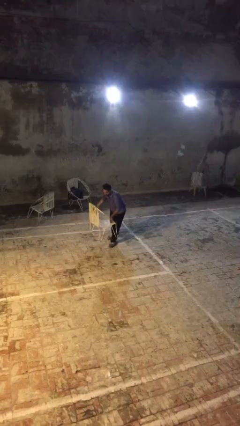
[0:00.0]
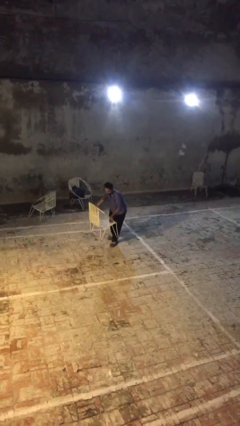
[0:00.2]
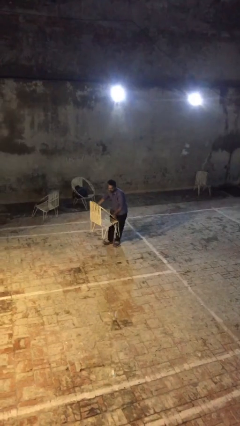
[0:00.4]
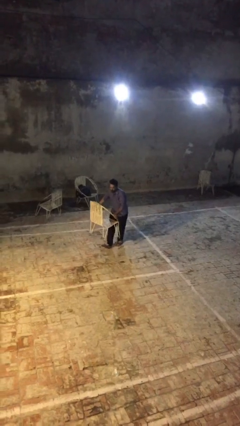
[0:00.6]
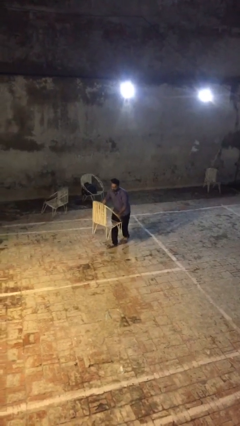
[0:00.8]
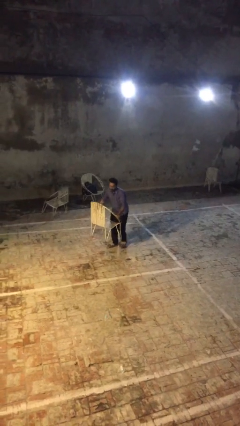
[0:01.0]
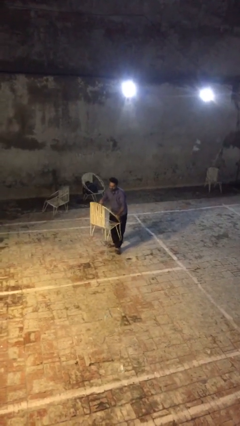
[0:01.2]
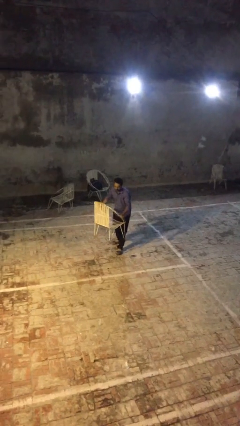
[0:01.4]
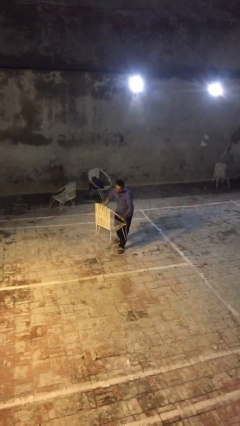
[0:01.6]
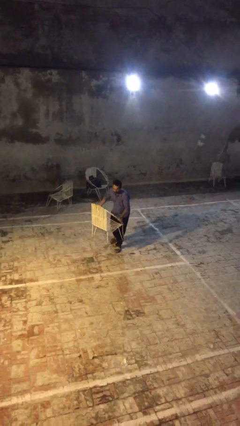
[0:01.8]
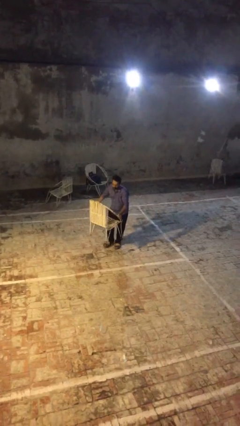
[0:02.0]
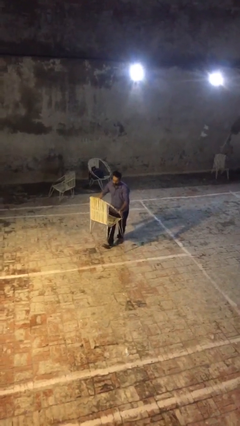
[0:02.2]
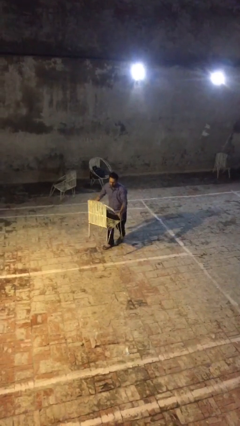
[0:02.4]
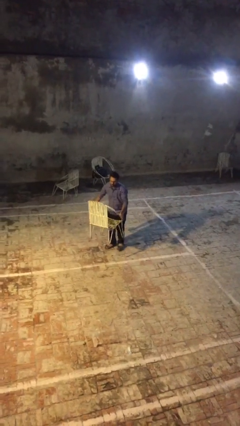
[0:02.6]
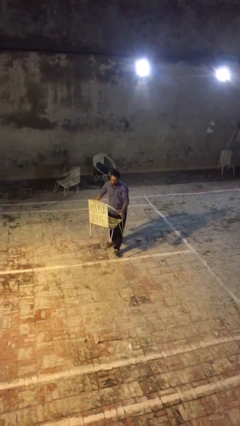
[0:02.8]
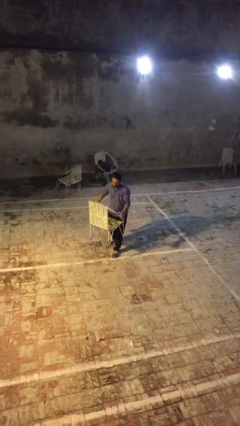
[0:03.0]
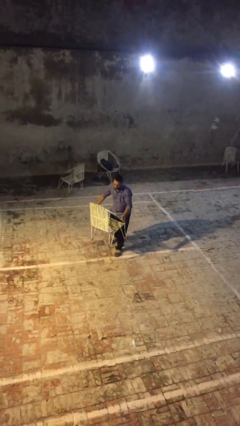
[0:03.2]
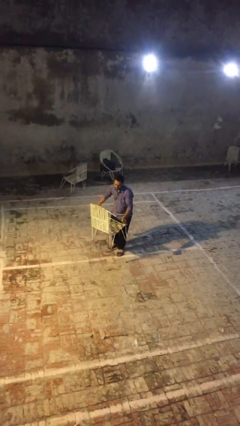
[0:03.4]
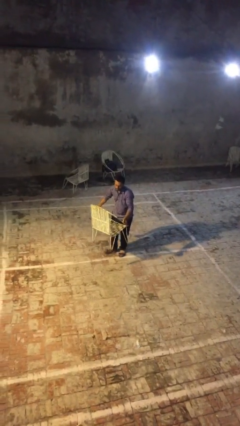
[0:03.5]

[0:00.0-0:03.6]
person carries heavy object

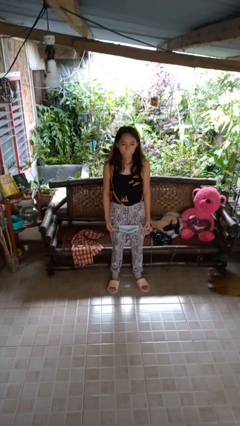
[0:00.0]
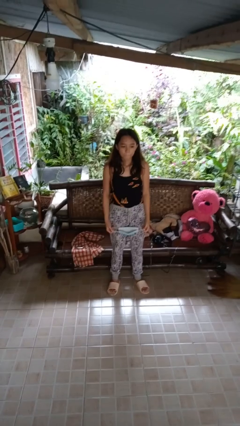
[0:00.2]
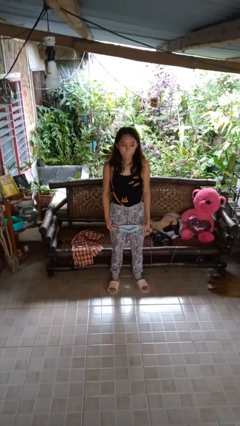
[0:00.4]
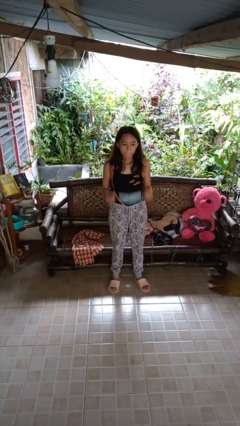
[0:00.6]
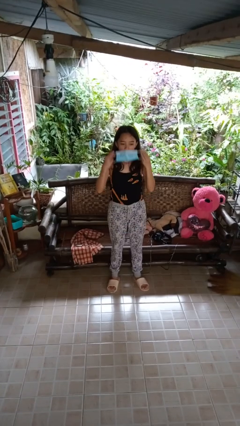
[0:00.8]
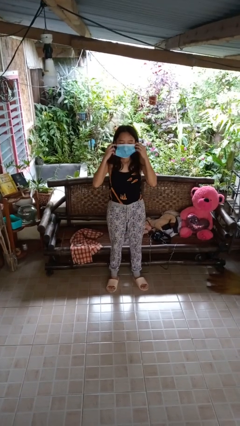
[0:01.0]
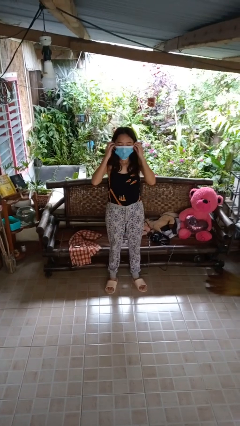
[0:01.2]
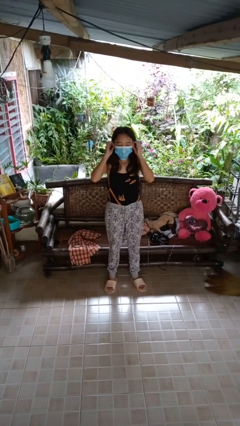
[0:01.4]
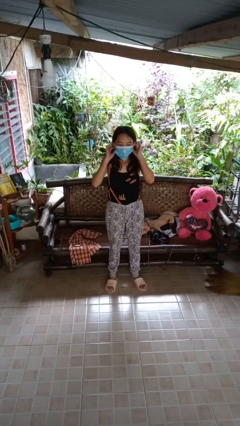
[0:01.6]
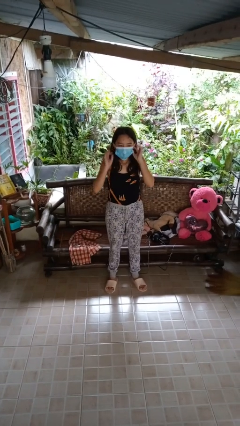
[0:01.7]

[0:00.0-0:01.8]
person puts on facemask

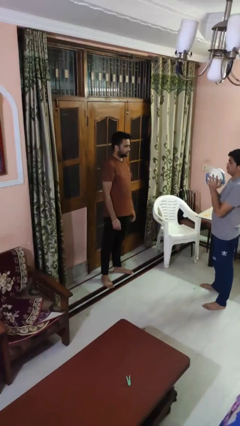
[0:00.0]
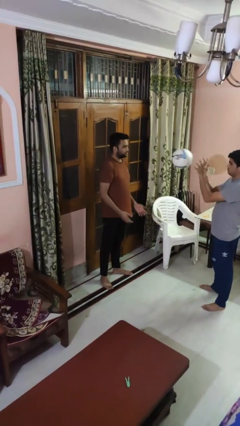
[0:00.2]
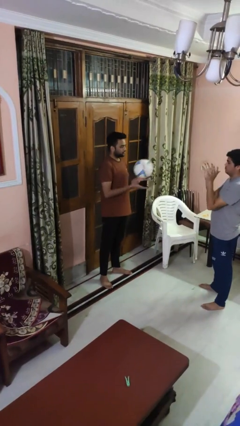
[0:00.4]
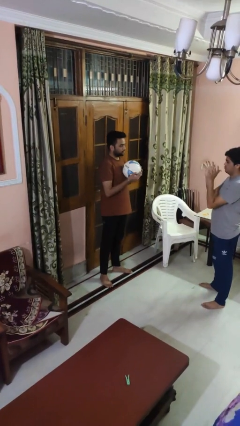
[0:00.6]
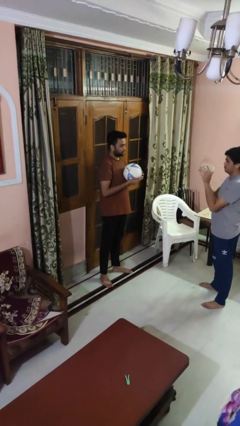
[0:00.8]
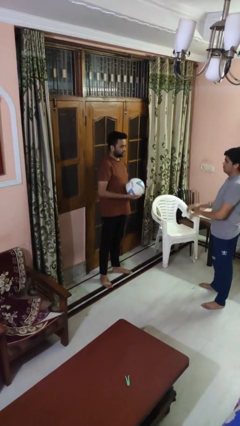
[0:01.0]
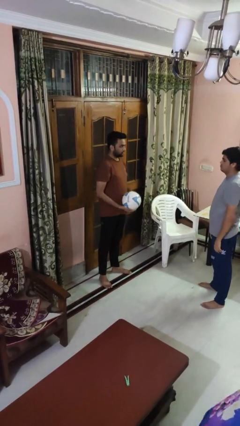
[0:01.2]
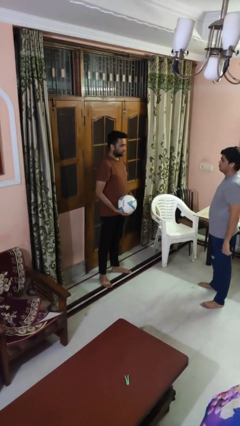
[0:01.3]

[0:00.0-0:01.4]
person catches object from person

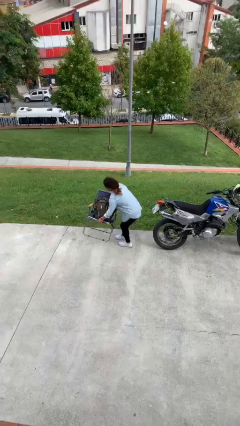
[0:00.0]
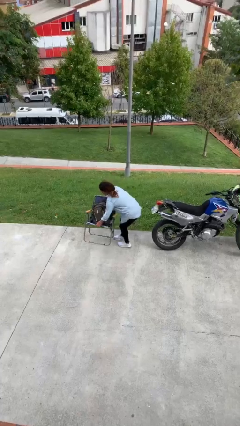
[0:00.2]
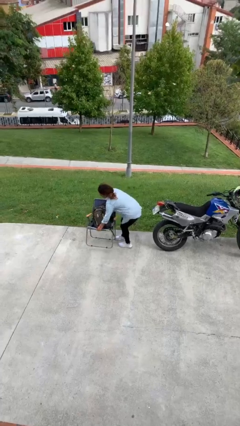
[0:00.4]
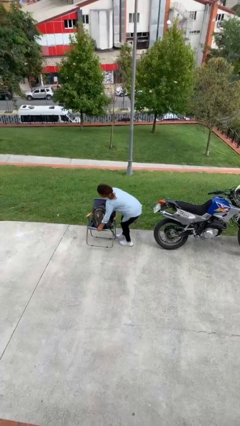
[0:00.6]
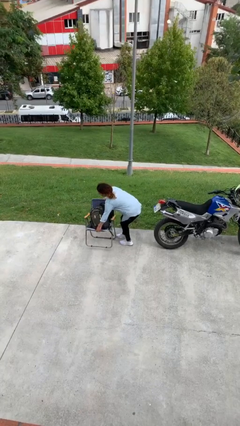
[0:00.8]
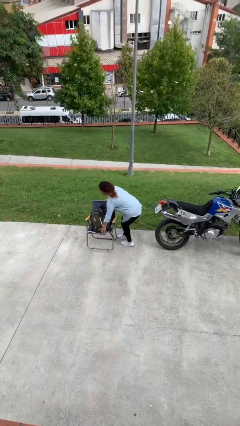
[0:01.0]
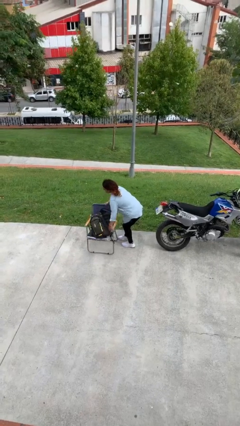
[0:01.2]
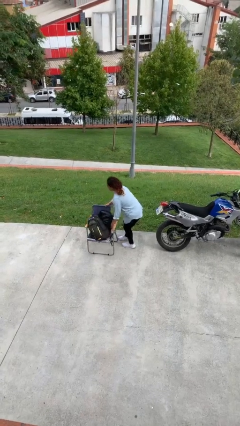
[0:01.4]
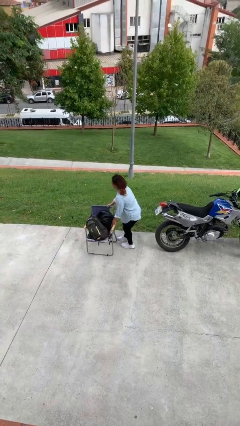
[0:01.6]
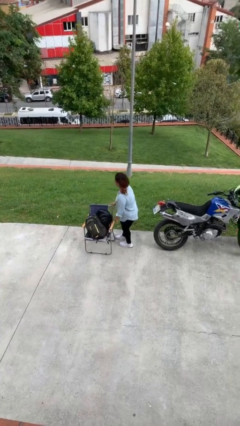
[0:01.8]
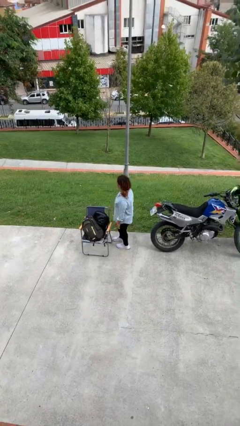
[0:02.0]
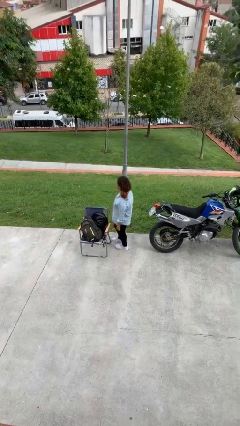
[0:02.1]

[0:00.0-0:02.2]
person puts down object on floor

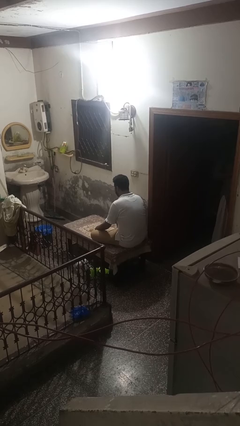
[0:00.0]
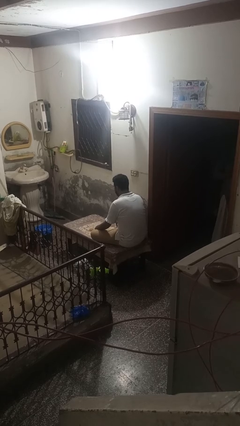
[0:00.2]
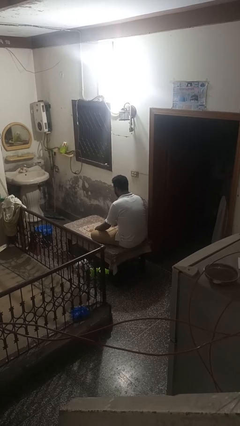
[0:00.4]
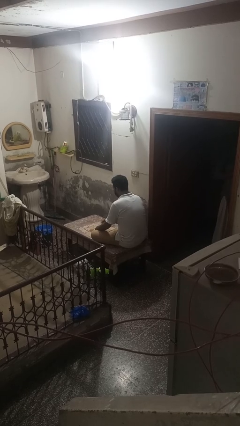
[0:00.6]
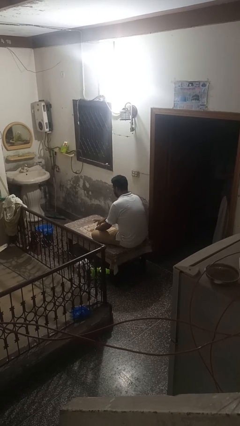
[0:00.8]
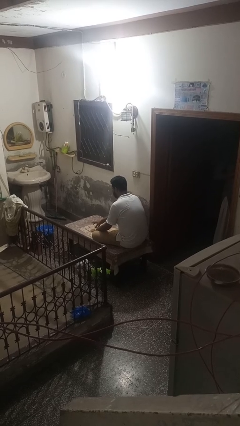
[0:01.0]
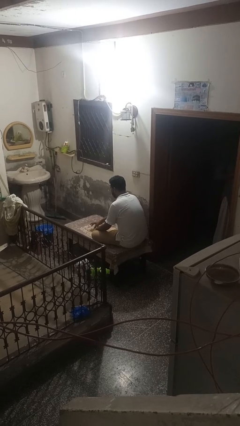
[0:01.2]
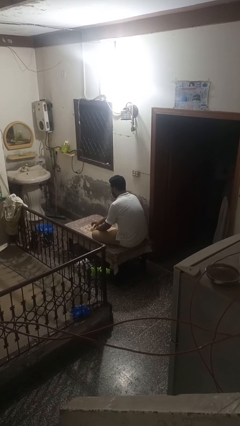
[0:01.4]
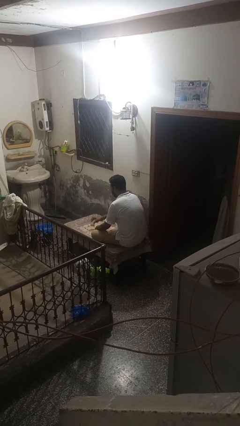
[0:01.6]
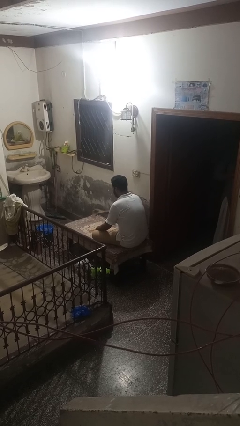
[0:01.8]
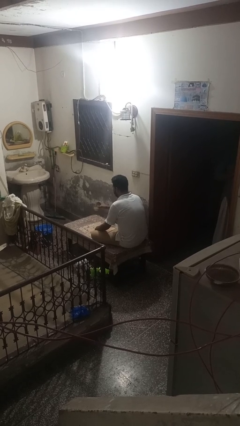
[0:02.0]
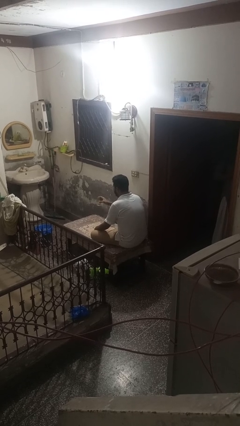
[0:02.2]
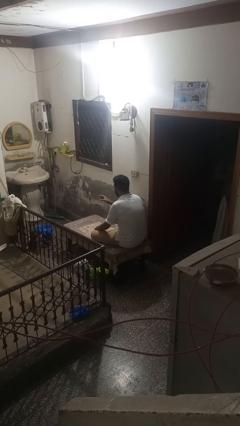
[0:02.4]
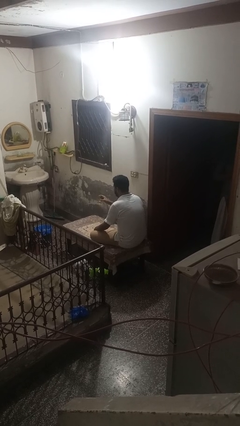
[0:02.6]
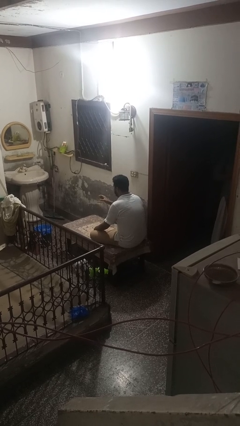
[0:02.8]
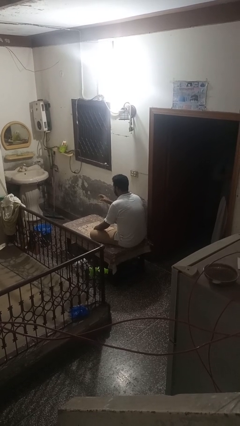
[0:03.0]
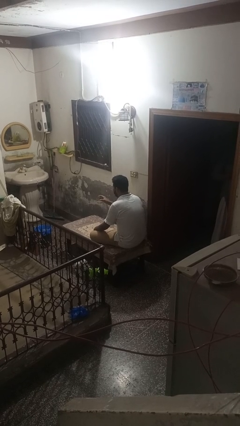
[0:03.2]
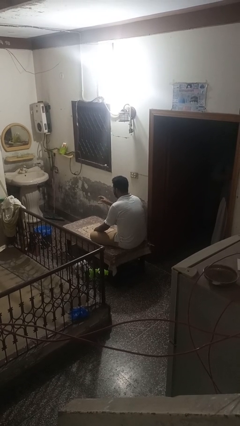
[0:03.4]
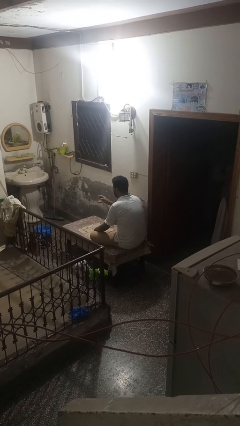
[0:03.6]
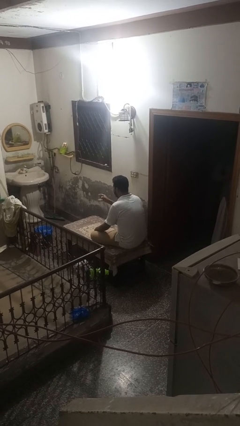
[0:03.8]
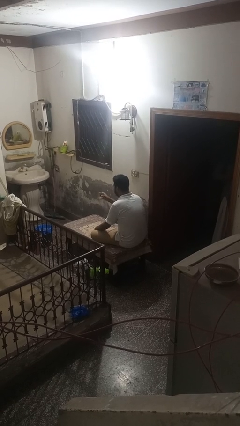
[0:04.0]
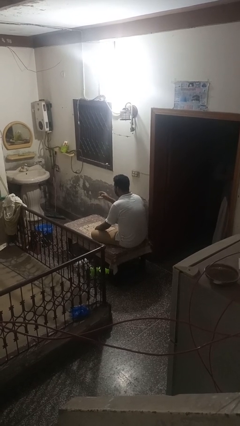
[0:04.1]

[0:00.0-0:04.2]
person picks up object from table

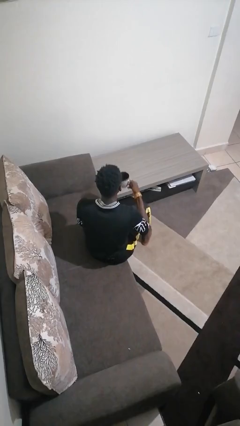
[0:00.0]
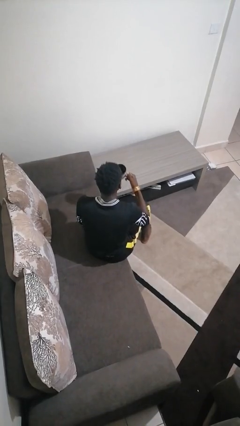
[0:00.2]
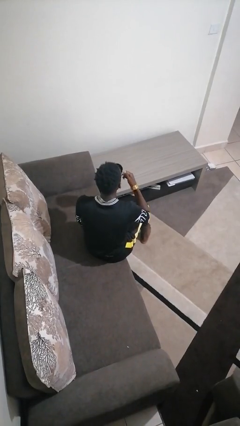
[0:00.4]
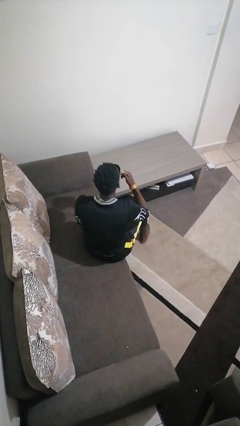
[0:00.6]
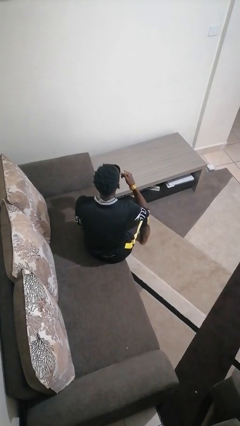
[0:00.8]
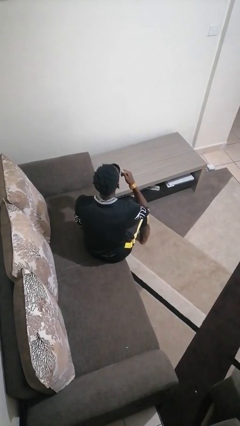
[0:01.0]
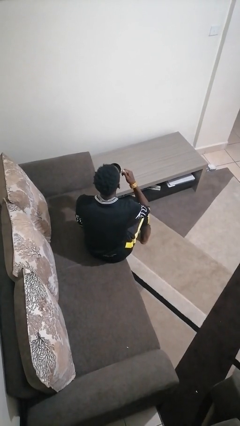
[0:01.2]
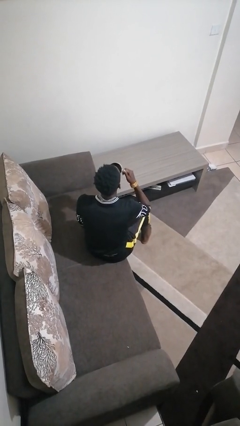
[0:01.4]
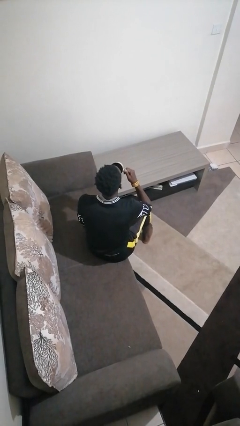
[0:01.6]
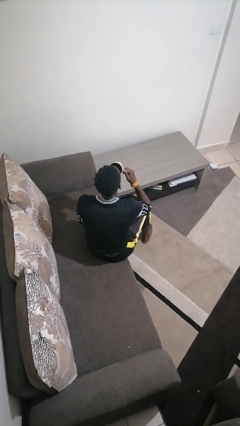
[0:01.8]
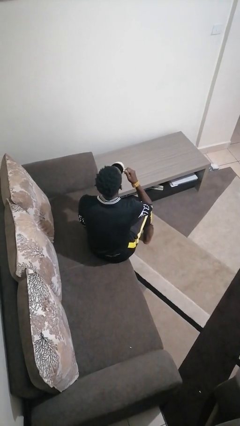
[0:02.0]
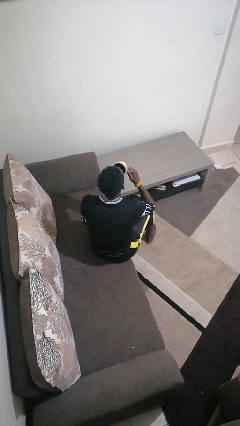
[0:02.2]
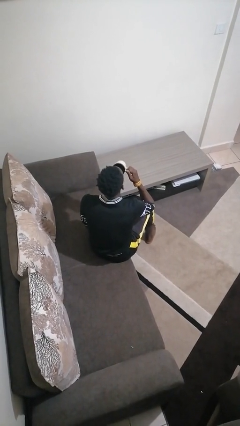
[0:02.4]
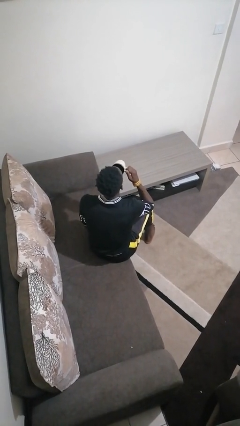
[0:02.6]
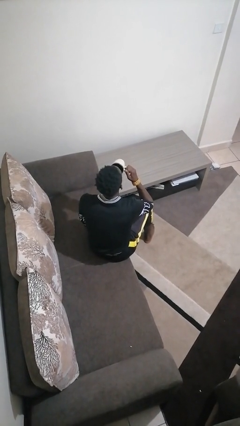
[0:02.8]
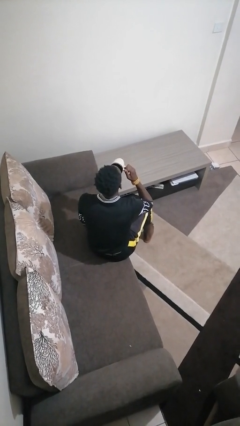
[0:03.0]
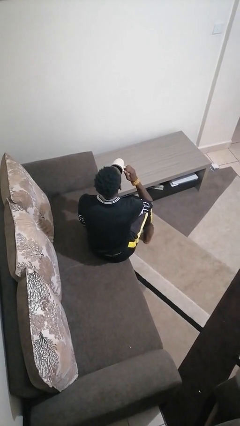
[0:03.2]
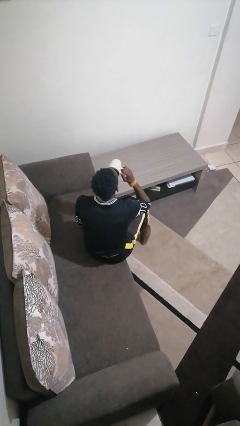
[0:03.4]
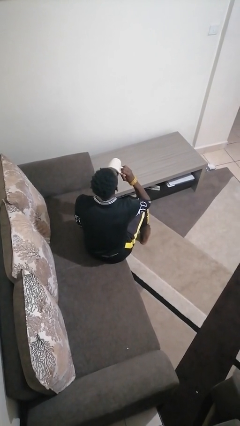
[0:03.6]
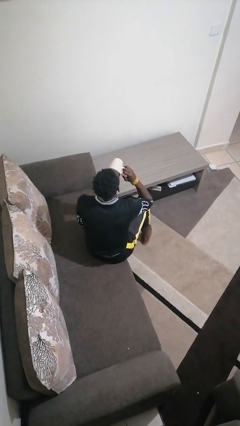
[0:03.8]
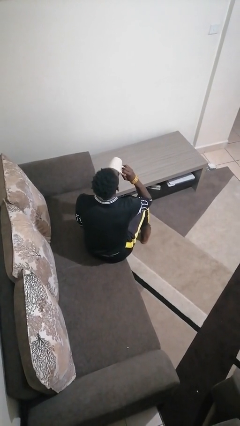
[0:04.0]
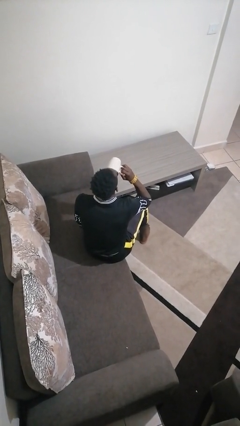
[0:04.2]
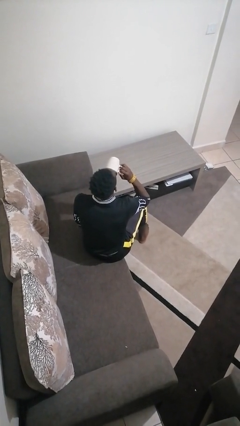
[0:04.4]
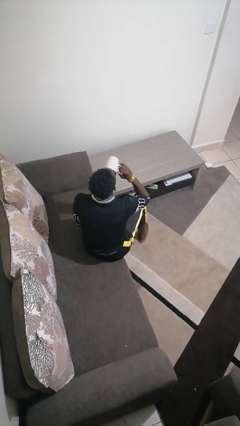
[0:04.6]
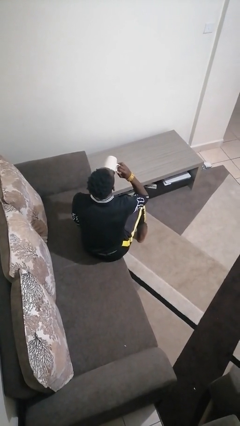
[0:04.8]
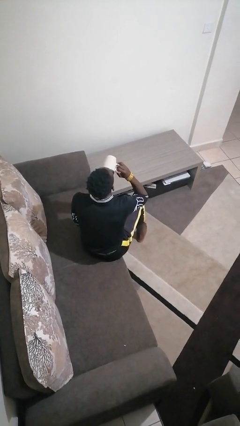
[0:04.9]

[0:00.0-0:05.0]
person drinks from mug
